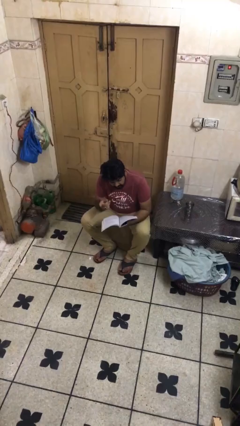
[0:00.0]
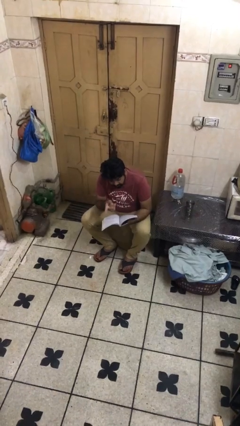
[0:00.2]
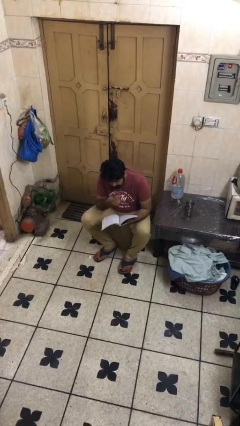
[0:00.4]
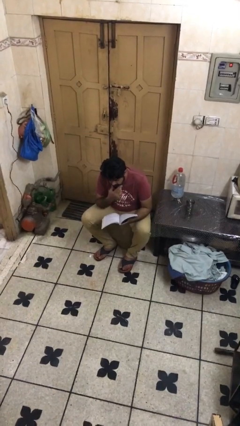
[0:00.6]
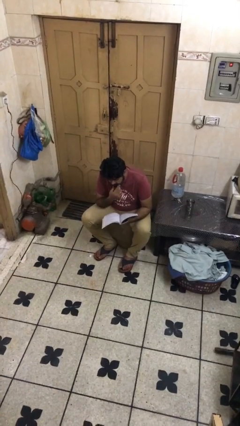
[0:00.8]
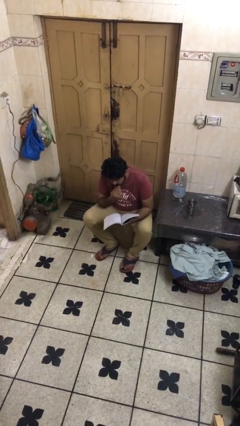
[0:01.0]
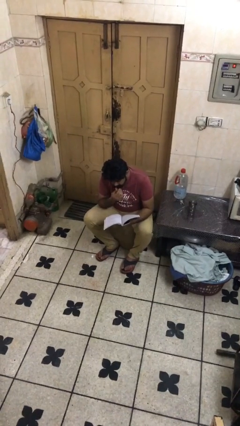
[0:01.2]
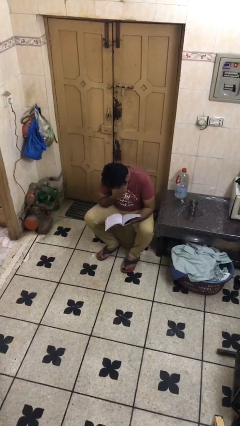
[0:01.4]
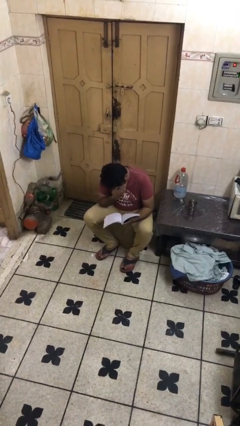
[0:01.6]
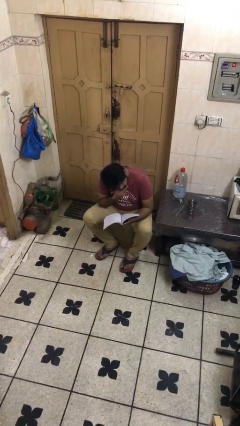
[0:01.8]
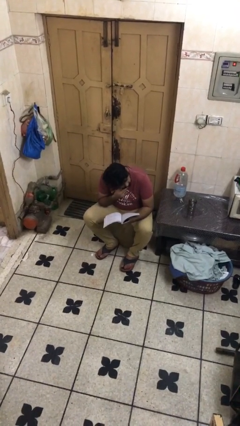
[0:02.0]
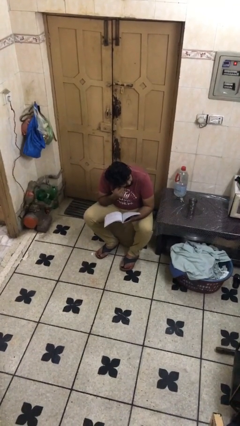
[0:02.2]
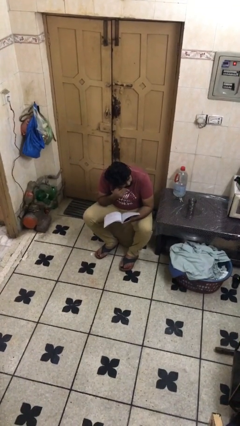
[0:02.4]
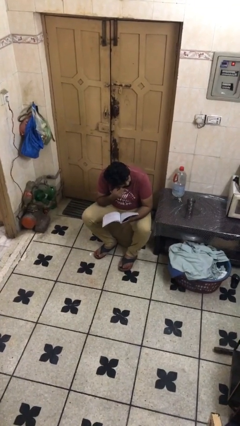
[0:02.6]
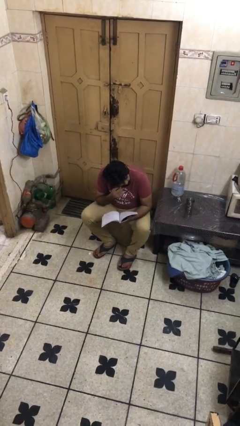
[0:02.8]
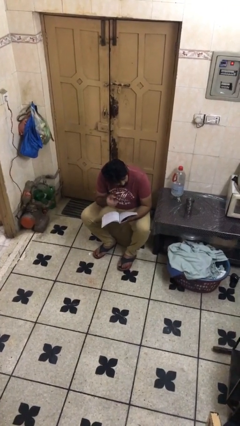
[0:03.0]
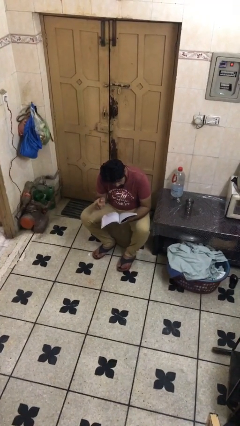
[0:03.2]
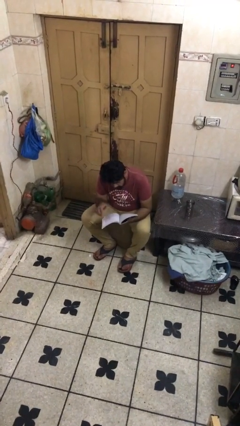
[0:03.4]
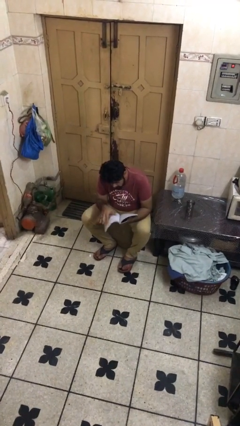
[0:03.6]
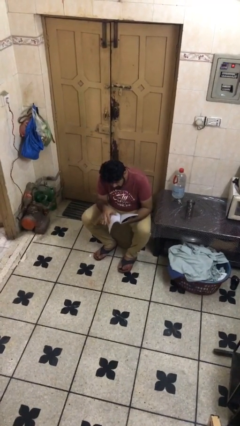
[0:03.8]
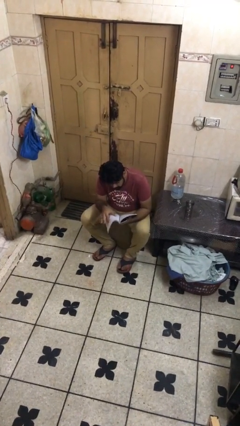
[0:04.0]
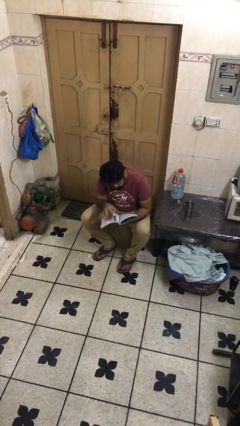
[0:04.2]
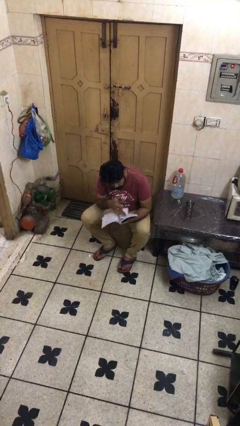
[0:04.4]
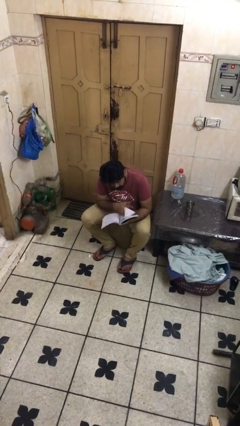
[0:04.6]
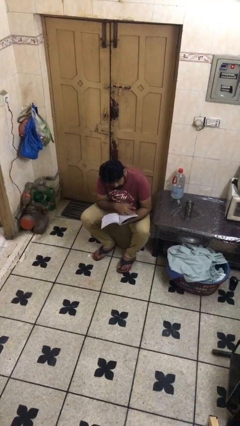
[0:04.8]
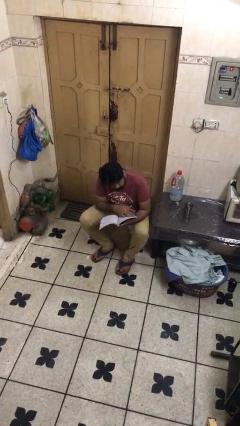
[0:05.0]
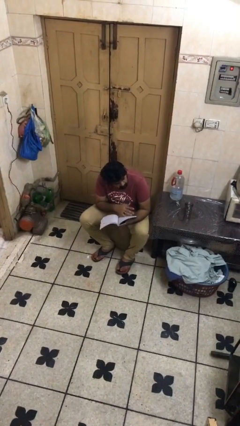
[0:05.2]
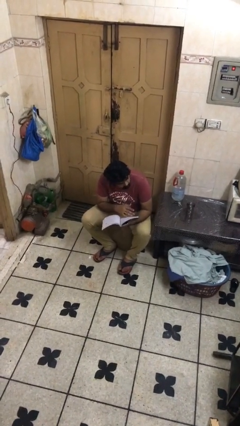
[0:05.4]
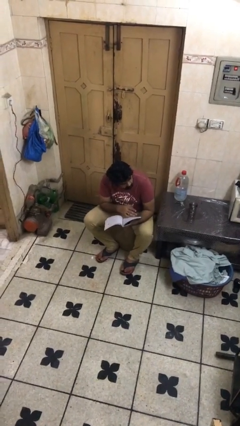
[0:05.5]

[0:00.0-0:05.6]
person reads document

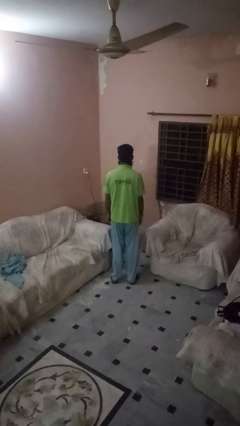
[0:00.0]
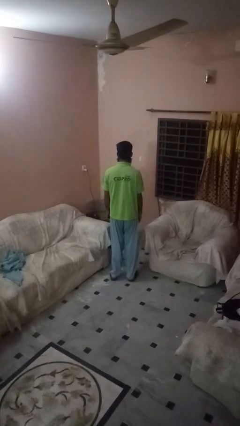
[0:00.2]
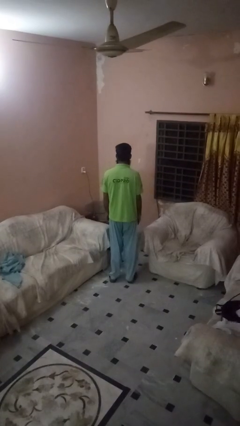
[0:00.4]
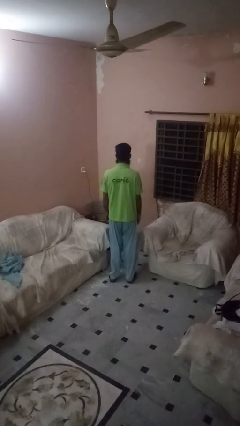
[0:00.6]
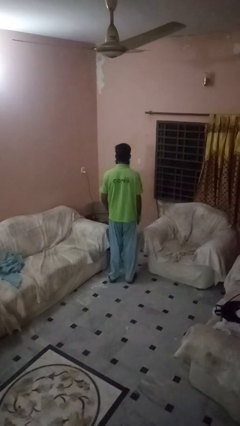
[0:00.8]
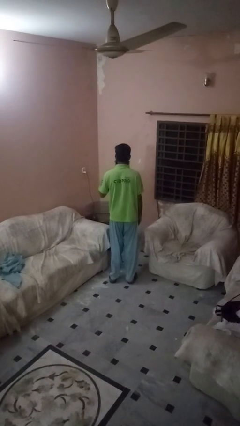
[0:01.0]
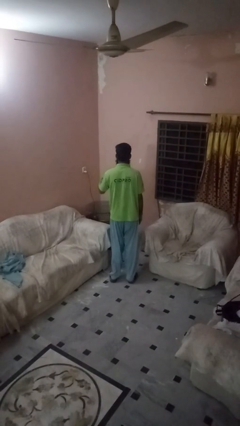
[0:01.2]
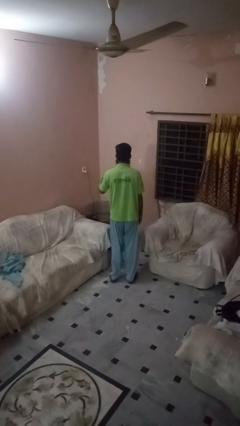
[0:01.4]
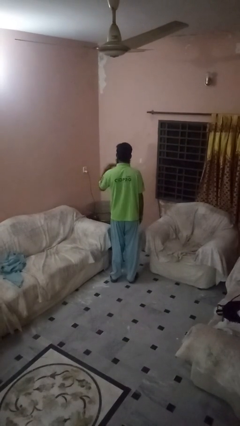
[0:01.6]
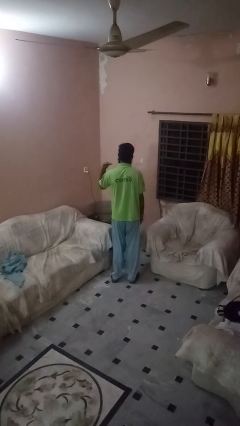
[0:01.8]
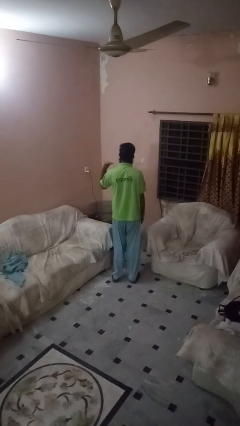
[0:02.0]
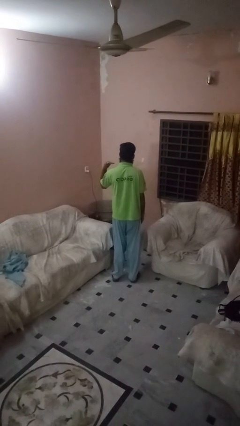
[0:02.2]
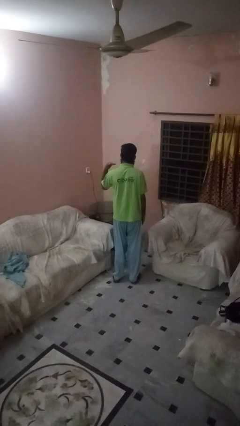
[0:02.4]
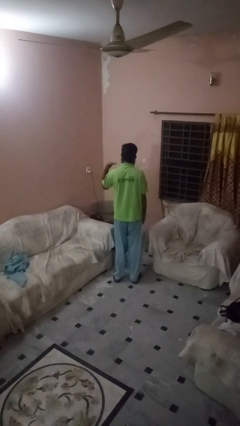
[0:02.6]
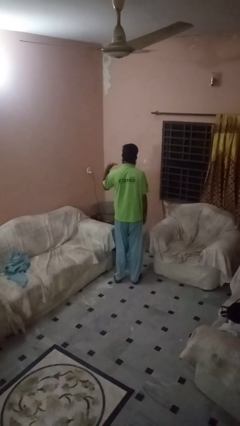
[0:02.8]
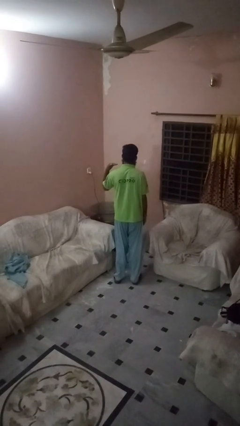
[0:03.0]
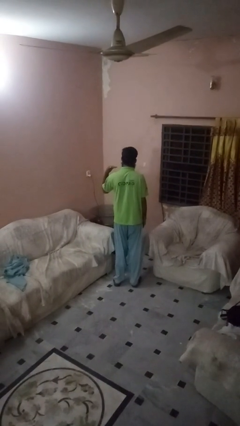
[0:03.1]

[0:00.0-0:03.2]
person gestures cut

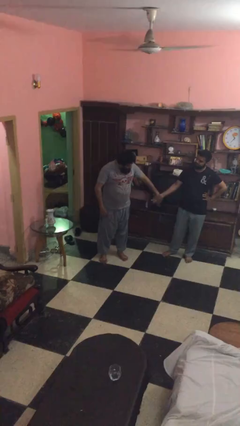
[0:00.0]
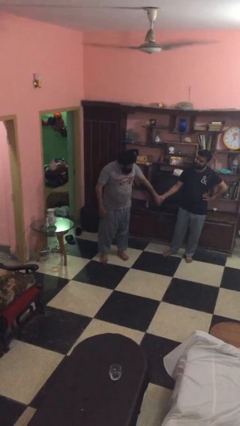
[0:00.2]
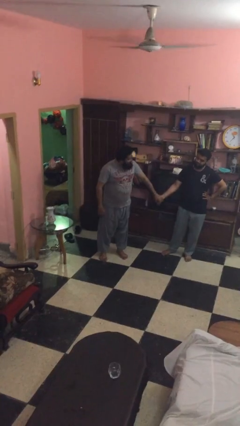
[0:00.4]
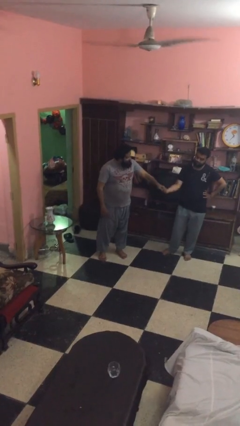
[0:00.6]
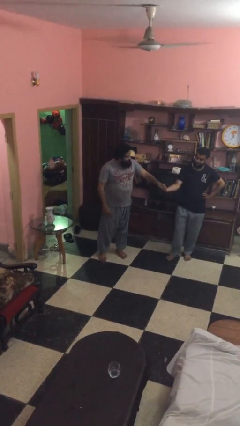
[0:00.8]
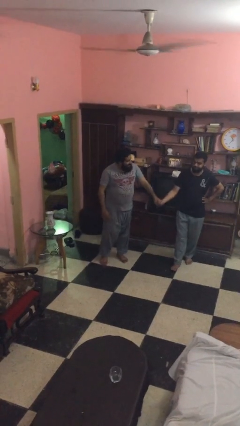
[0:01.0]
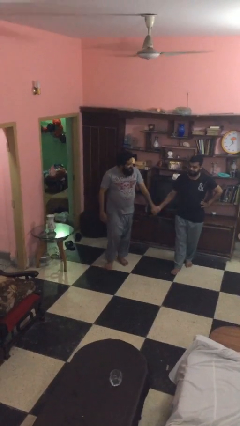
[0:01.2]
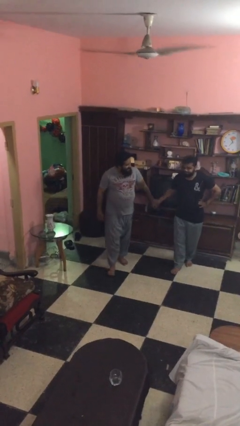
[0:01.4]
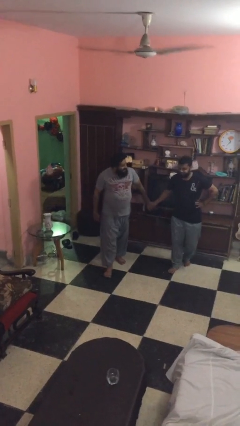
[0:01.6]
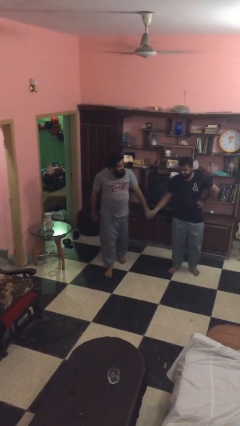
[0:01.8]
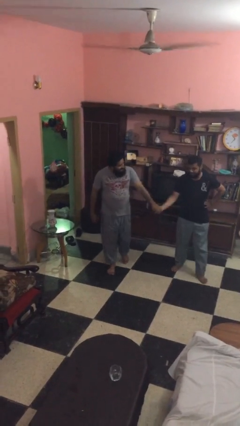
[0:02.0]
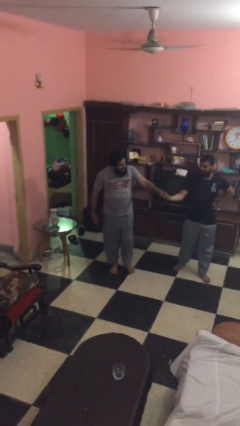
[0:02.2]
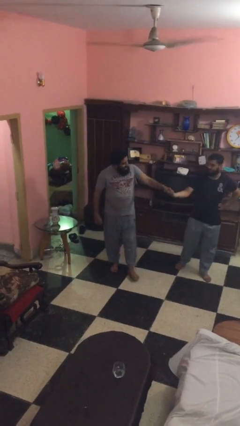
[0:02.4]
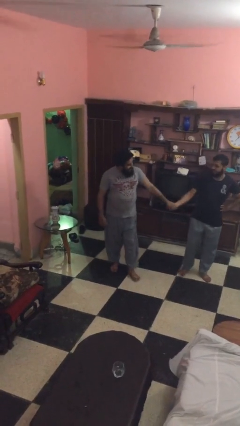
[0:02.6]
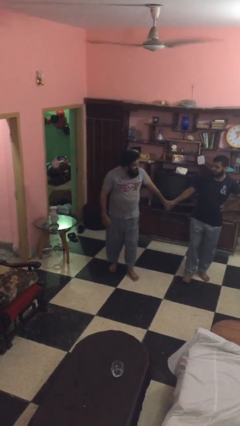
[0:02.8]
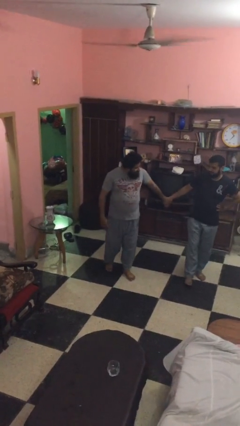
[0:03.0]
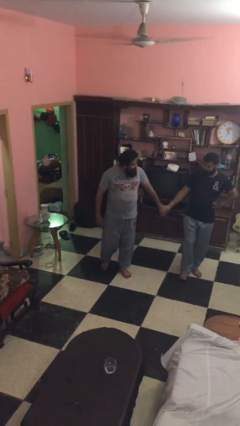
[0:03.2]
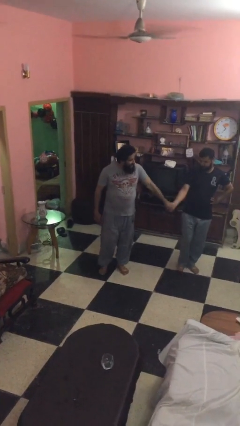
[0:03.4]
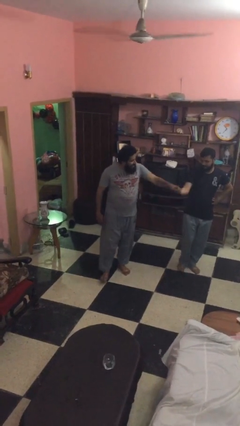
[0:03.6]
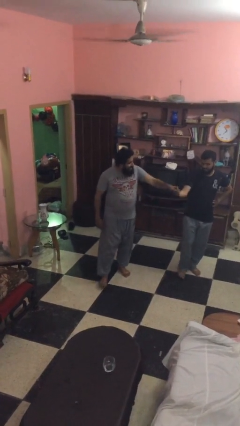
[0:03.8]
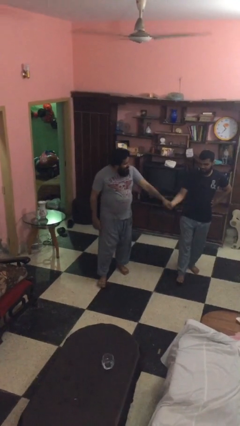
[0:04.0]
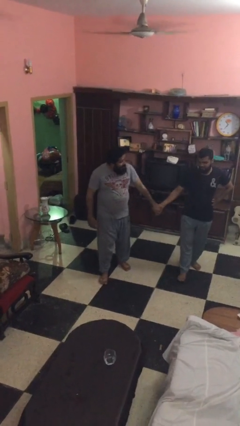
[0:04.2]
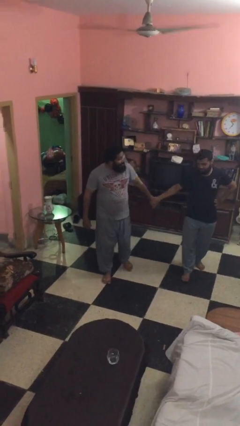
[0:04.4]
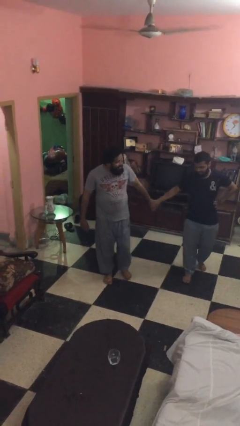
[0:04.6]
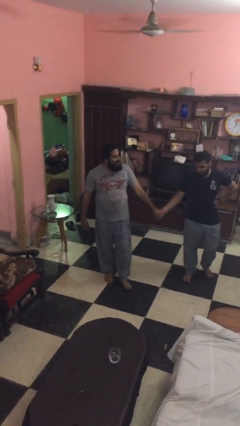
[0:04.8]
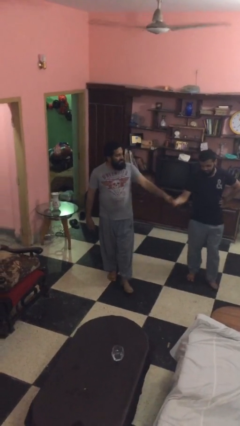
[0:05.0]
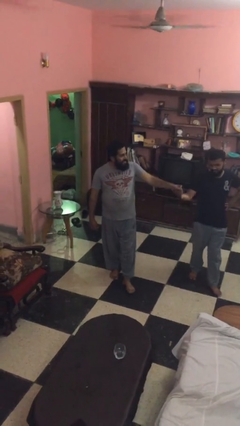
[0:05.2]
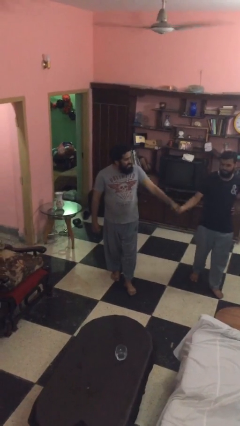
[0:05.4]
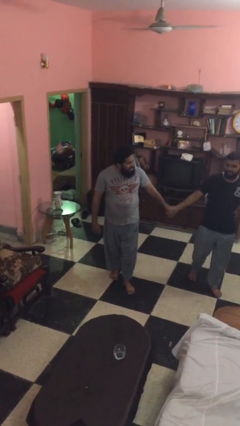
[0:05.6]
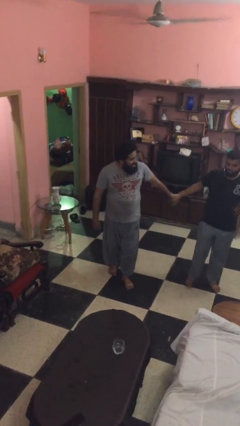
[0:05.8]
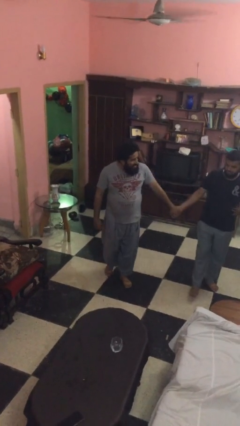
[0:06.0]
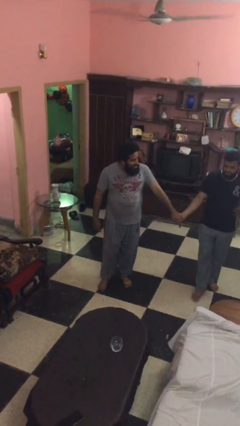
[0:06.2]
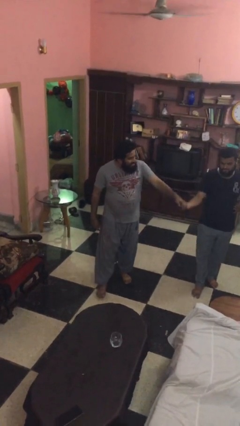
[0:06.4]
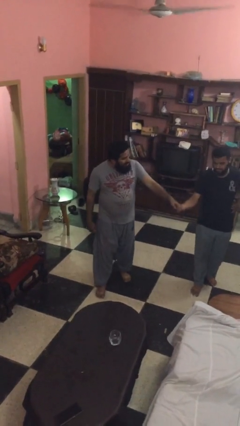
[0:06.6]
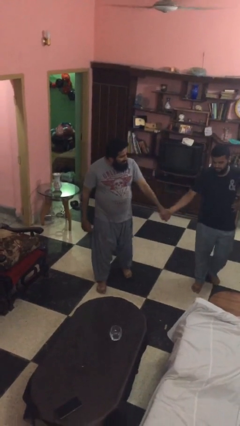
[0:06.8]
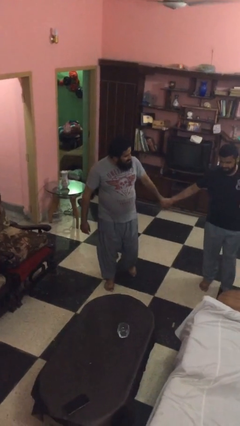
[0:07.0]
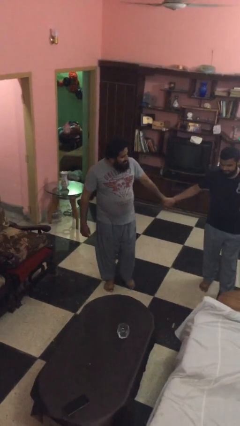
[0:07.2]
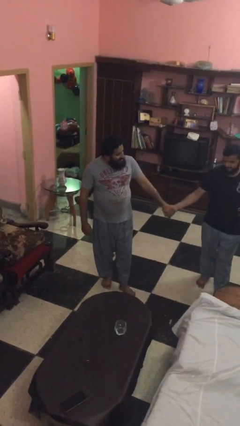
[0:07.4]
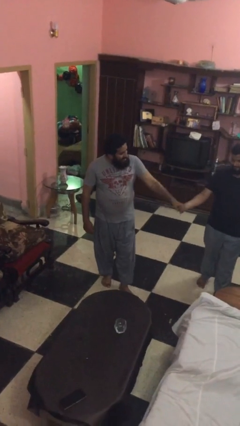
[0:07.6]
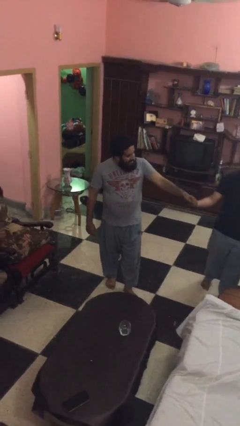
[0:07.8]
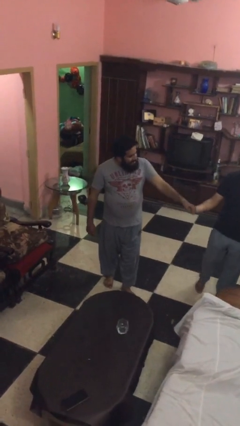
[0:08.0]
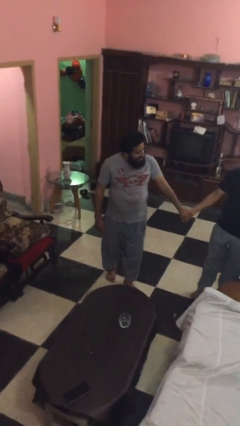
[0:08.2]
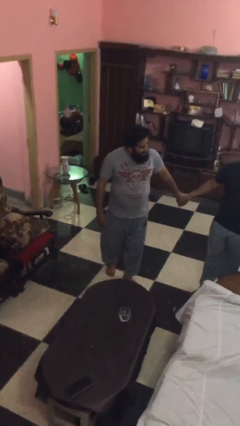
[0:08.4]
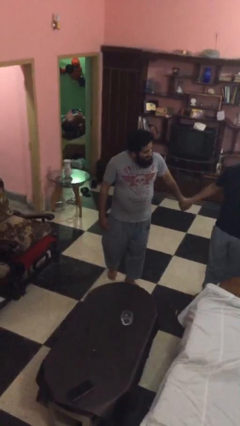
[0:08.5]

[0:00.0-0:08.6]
person holds hand

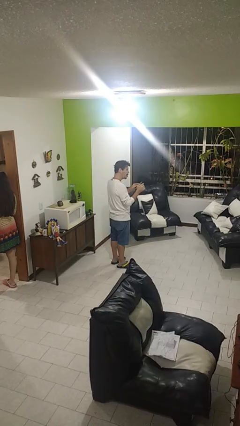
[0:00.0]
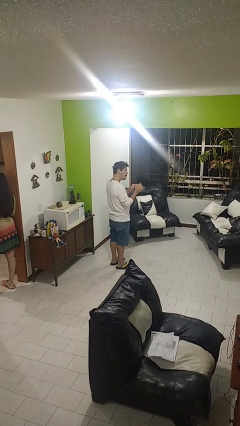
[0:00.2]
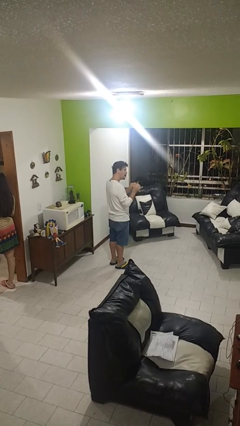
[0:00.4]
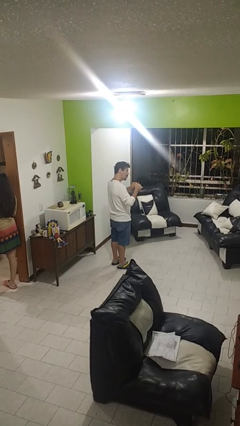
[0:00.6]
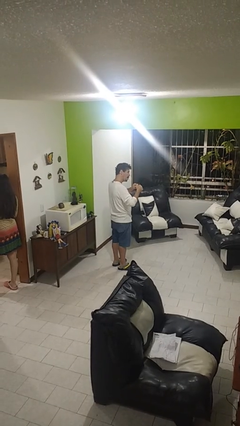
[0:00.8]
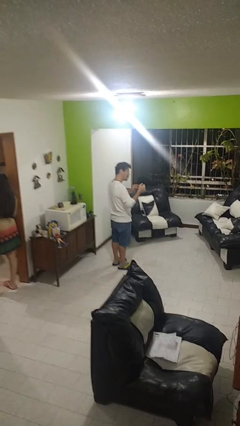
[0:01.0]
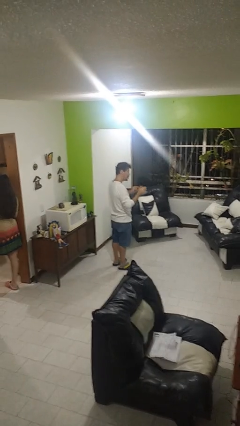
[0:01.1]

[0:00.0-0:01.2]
person files fingernails
